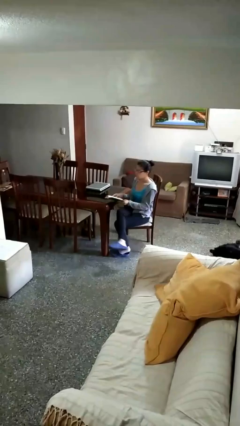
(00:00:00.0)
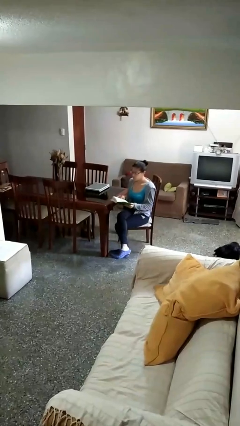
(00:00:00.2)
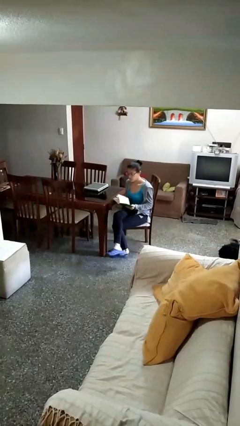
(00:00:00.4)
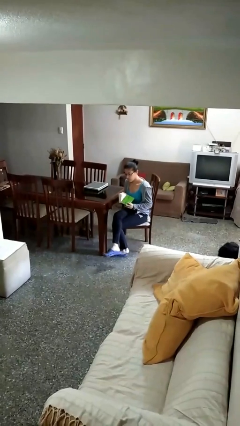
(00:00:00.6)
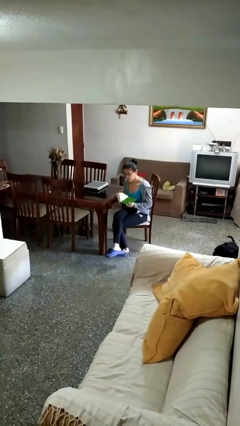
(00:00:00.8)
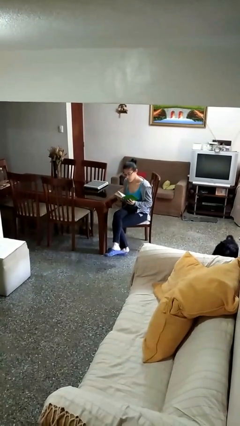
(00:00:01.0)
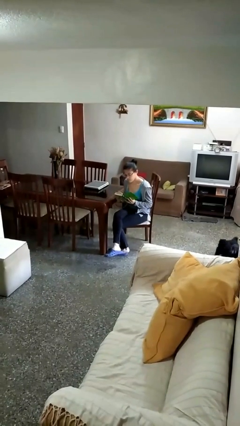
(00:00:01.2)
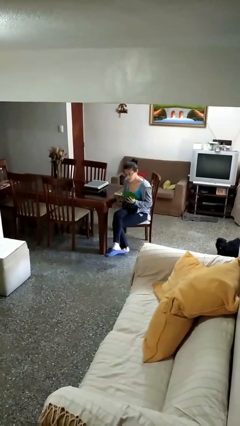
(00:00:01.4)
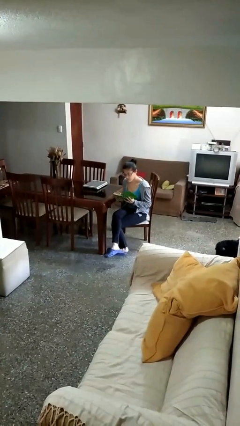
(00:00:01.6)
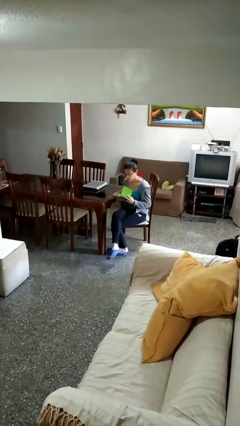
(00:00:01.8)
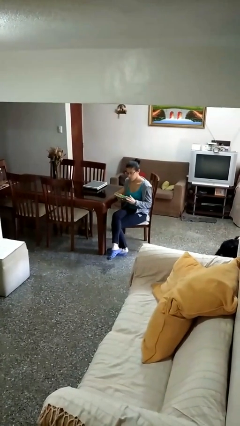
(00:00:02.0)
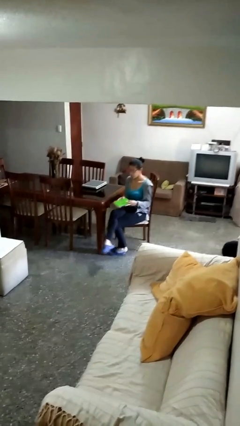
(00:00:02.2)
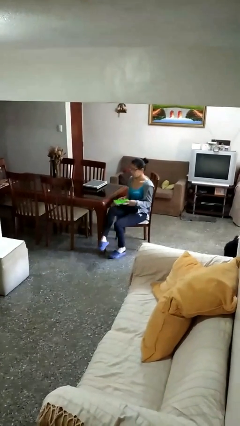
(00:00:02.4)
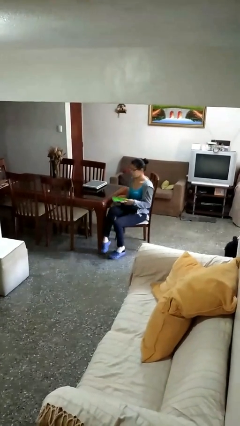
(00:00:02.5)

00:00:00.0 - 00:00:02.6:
person reads document

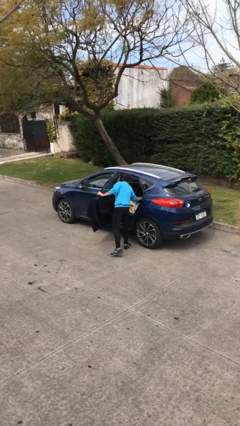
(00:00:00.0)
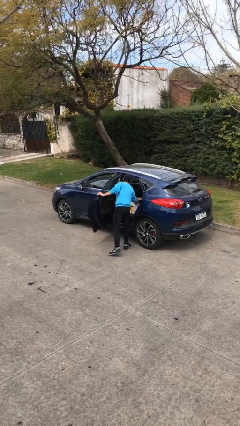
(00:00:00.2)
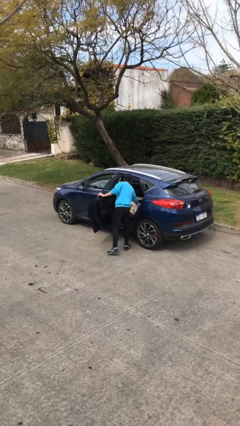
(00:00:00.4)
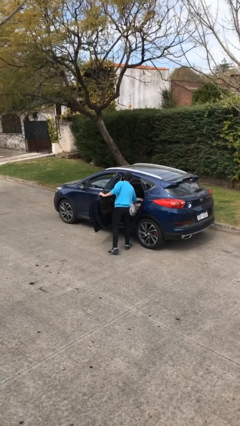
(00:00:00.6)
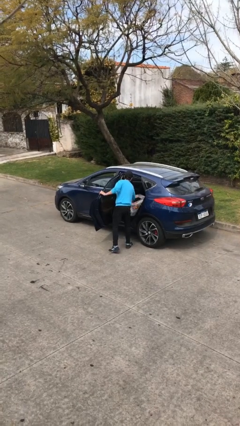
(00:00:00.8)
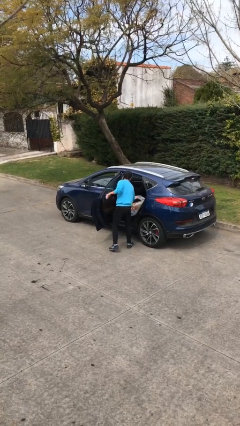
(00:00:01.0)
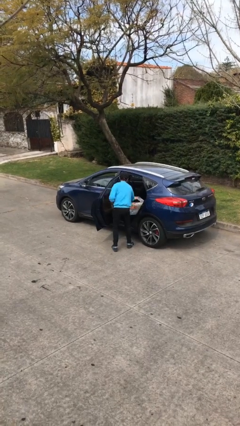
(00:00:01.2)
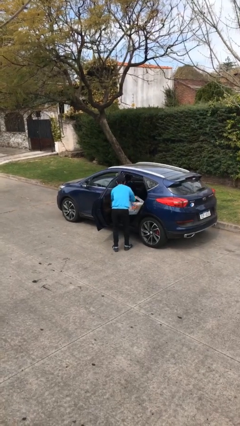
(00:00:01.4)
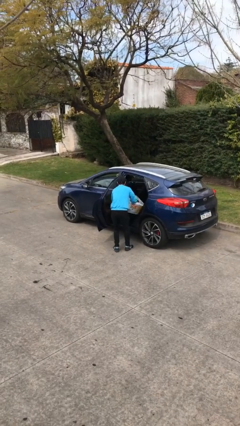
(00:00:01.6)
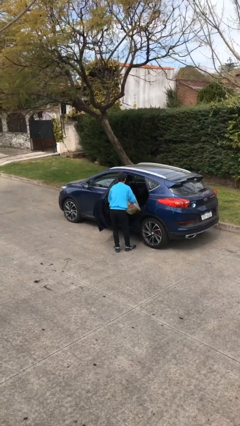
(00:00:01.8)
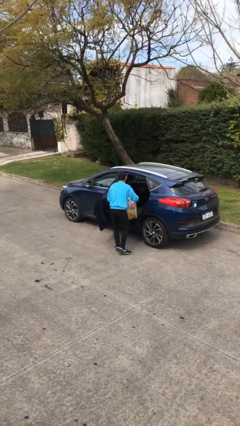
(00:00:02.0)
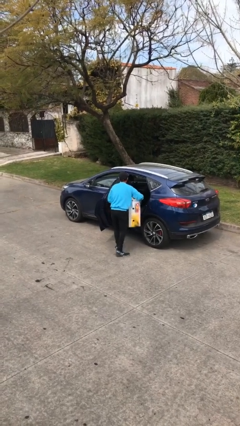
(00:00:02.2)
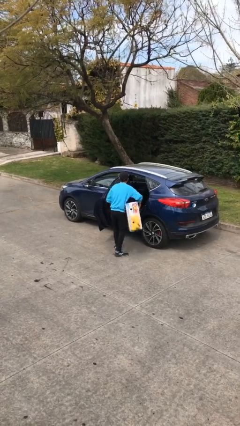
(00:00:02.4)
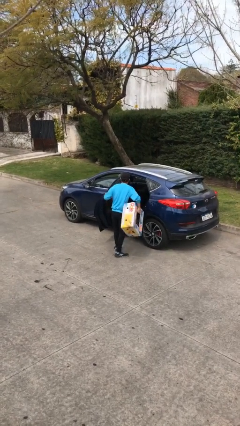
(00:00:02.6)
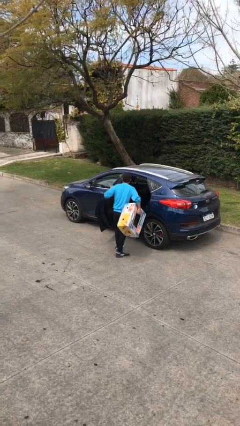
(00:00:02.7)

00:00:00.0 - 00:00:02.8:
person unloads car

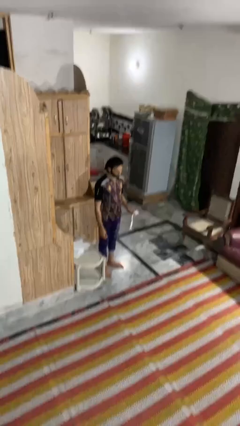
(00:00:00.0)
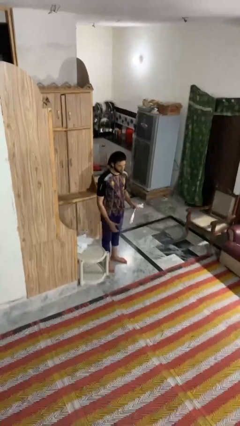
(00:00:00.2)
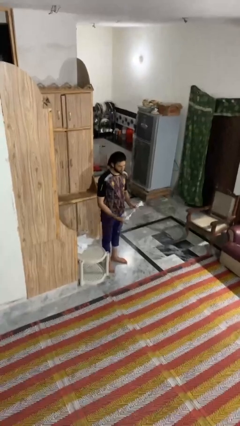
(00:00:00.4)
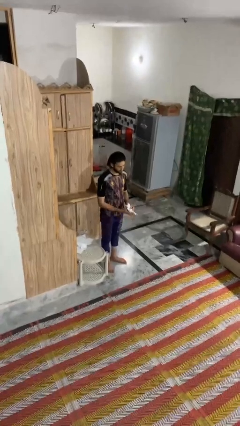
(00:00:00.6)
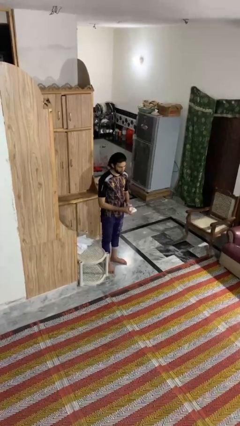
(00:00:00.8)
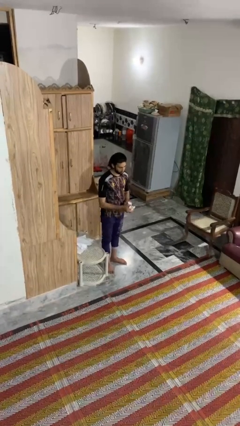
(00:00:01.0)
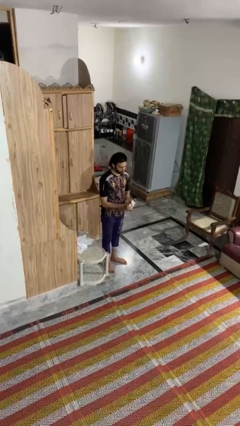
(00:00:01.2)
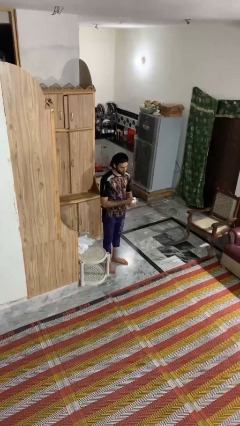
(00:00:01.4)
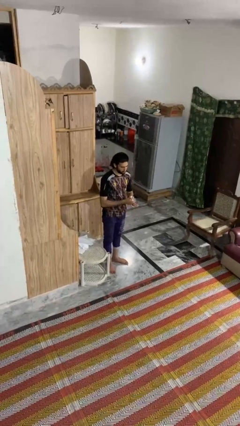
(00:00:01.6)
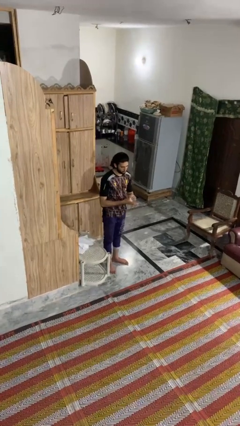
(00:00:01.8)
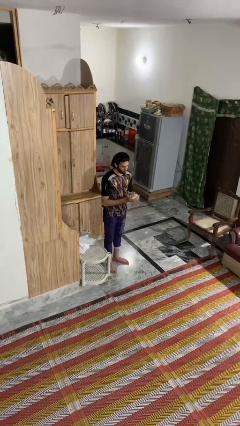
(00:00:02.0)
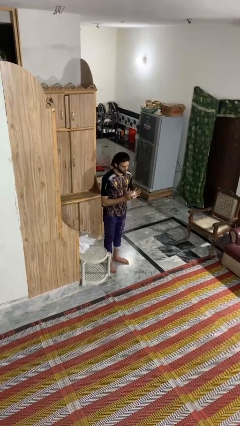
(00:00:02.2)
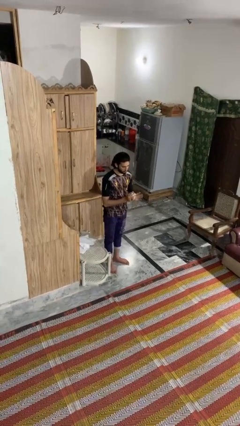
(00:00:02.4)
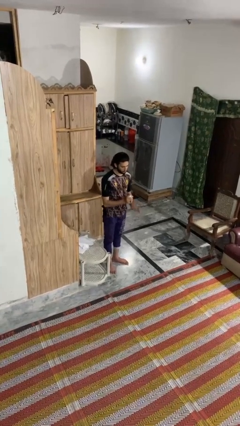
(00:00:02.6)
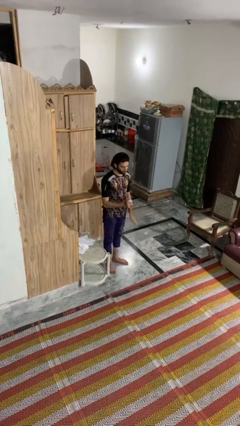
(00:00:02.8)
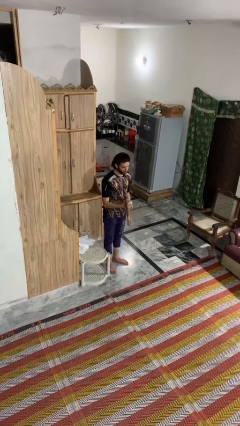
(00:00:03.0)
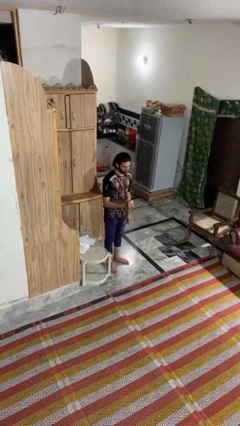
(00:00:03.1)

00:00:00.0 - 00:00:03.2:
person crumples paper

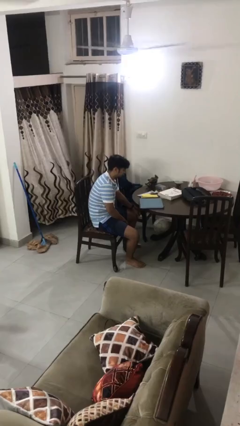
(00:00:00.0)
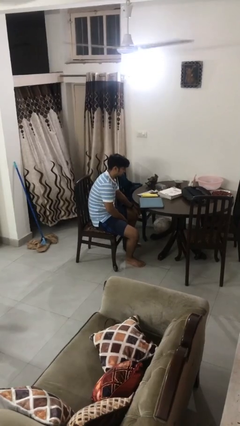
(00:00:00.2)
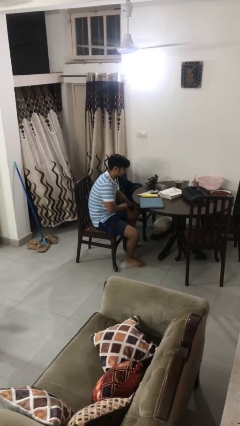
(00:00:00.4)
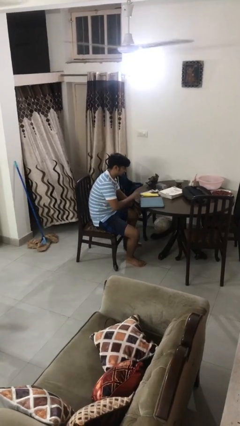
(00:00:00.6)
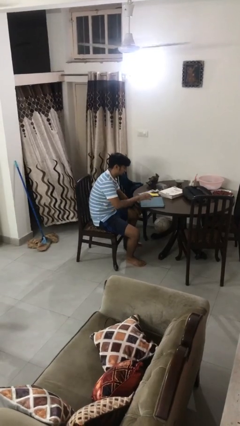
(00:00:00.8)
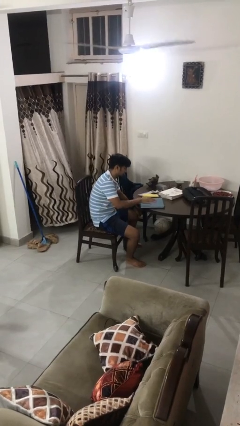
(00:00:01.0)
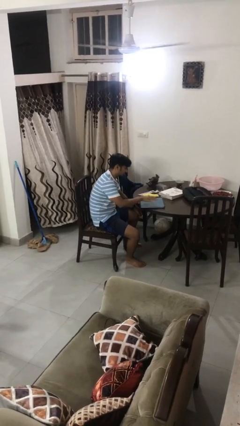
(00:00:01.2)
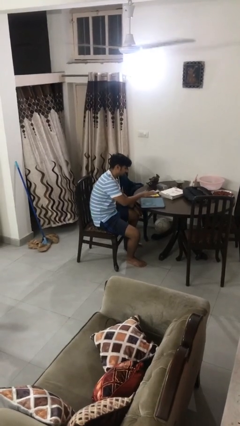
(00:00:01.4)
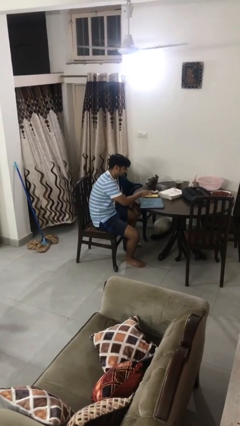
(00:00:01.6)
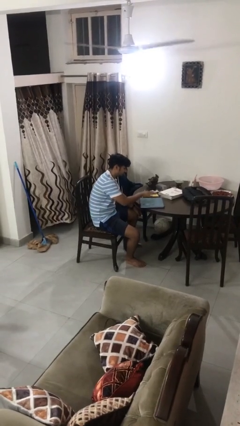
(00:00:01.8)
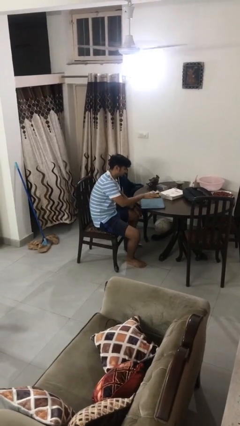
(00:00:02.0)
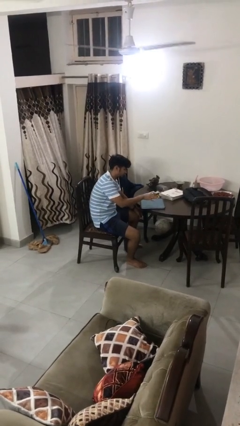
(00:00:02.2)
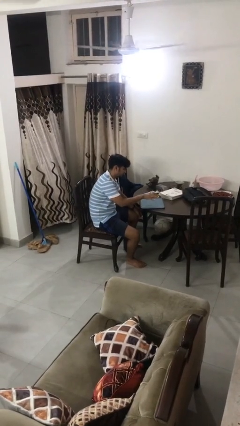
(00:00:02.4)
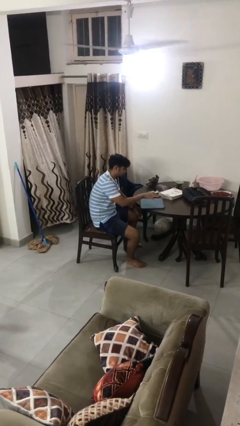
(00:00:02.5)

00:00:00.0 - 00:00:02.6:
person waves hand over object

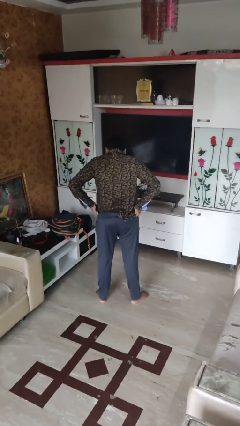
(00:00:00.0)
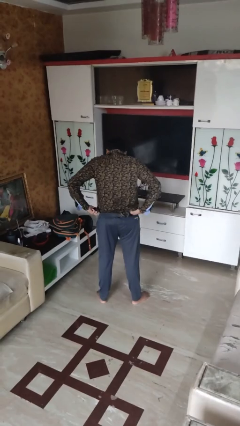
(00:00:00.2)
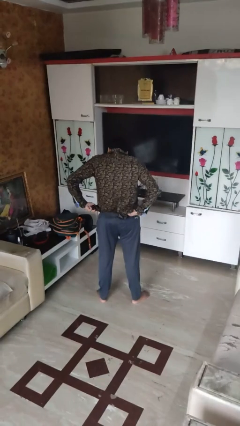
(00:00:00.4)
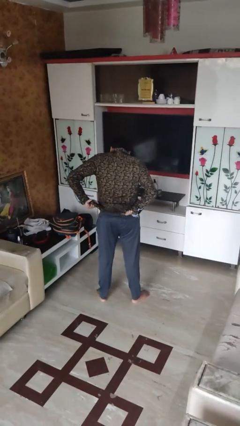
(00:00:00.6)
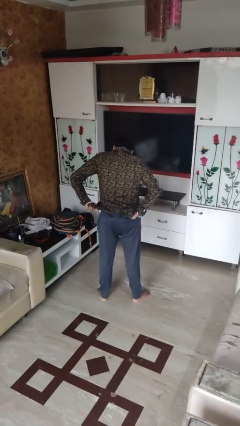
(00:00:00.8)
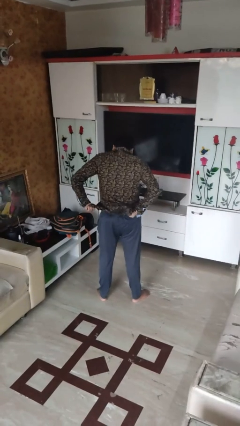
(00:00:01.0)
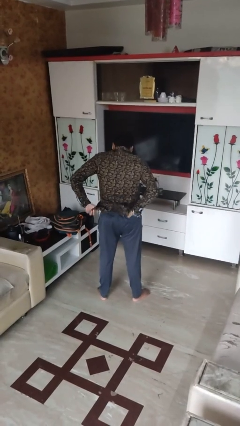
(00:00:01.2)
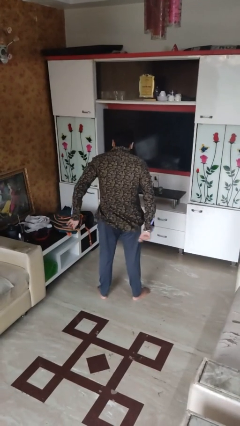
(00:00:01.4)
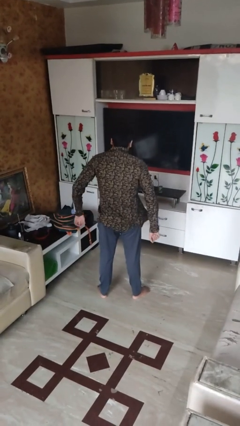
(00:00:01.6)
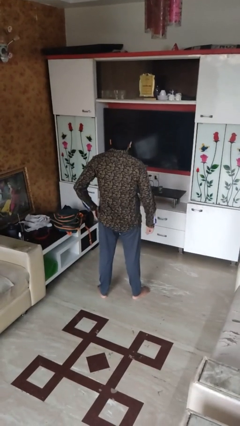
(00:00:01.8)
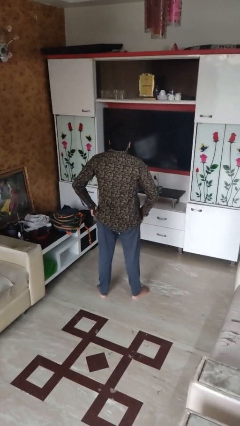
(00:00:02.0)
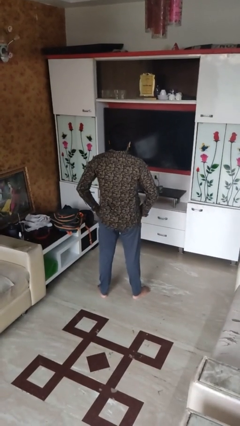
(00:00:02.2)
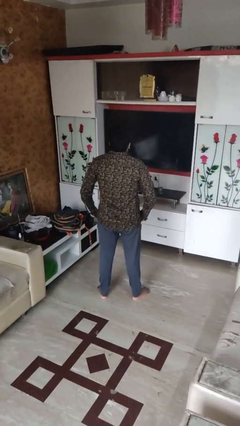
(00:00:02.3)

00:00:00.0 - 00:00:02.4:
person untucks shirt

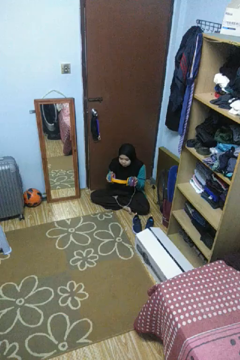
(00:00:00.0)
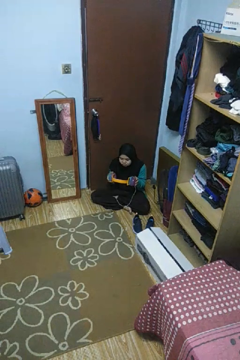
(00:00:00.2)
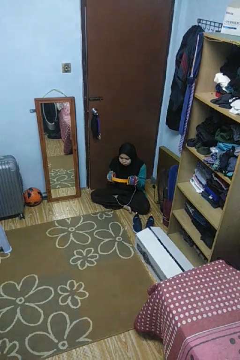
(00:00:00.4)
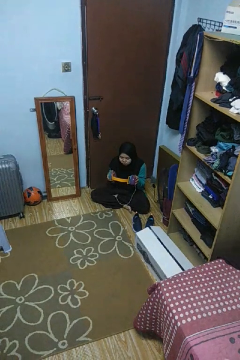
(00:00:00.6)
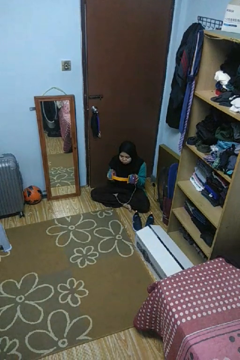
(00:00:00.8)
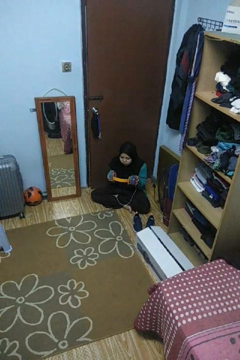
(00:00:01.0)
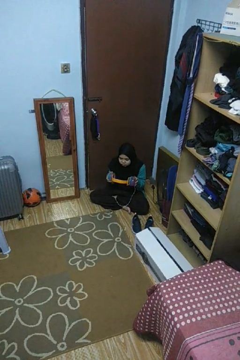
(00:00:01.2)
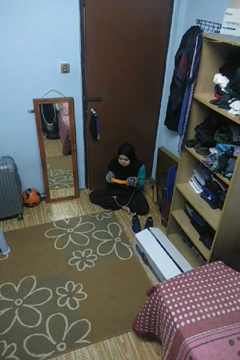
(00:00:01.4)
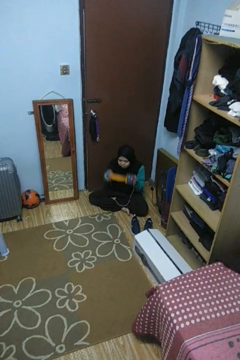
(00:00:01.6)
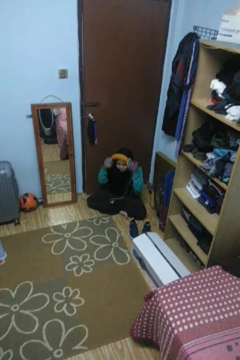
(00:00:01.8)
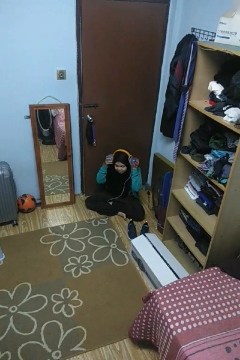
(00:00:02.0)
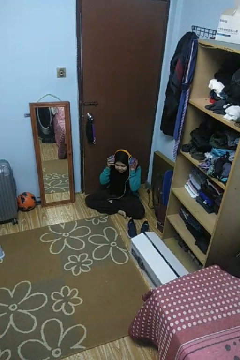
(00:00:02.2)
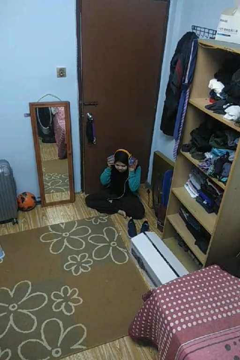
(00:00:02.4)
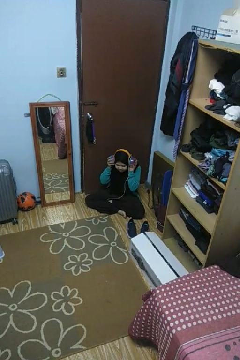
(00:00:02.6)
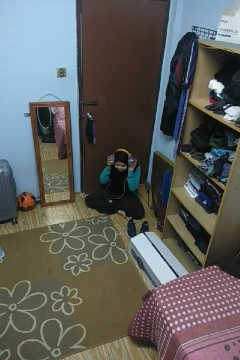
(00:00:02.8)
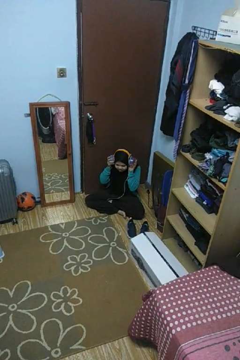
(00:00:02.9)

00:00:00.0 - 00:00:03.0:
person puts on headphones

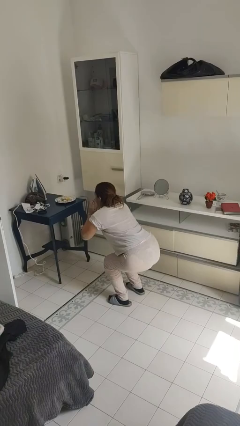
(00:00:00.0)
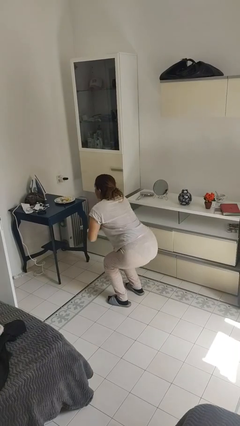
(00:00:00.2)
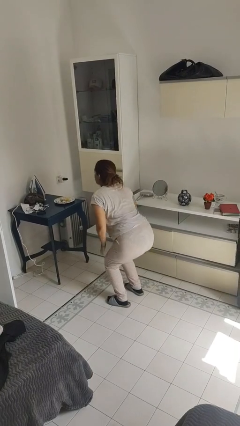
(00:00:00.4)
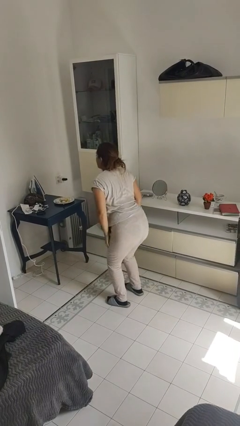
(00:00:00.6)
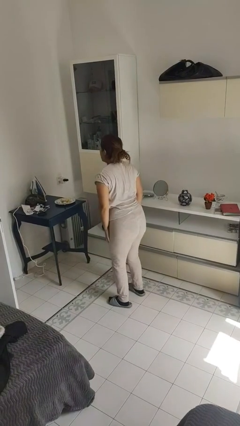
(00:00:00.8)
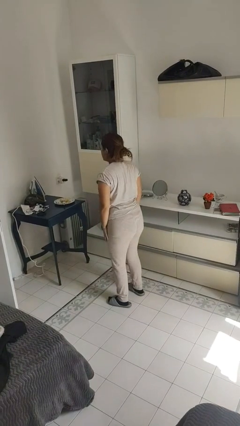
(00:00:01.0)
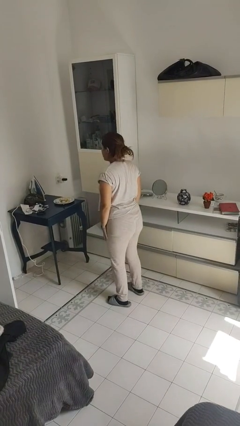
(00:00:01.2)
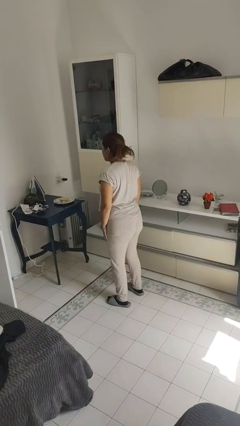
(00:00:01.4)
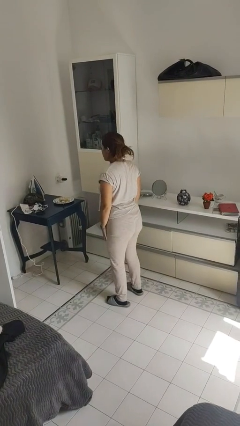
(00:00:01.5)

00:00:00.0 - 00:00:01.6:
person stands up
